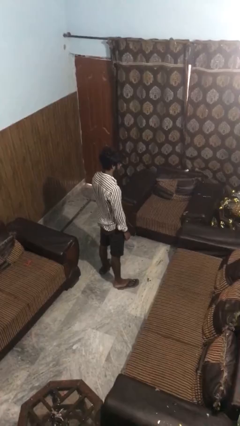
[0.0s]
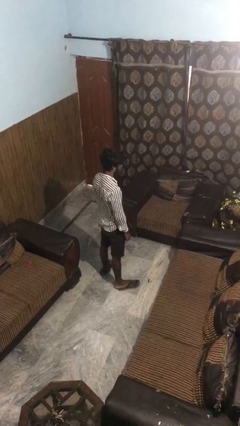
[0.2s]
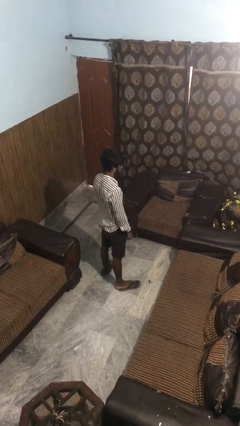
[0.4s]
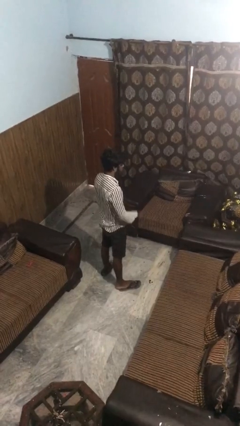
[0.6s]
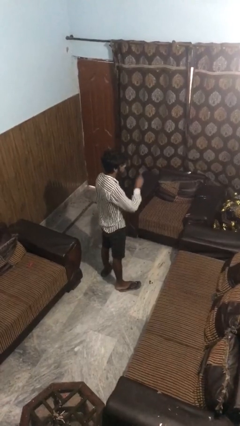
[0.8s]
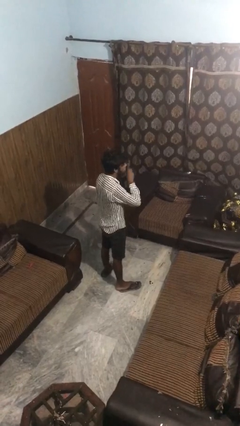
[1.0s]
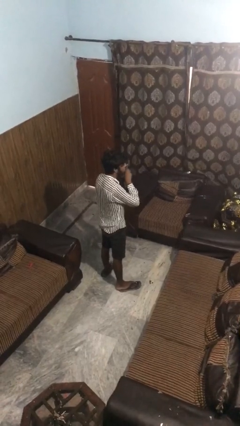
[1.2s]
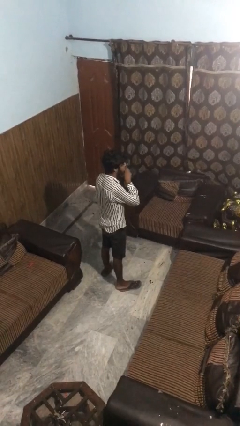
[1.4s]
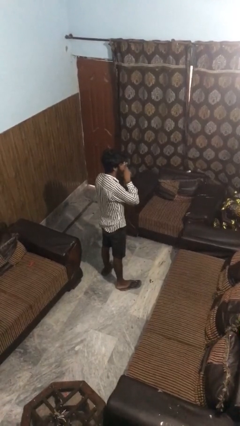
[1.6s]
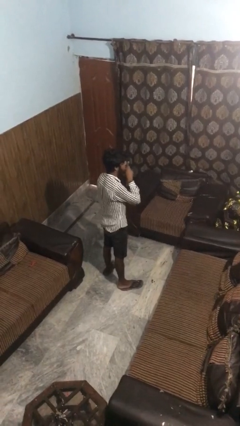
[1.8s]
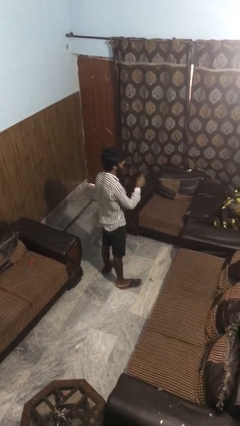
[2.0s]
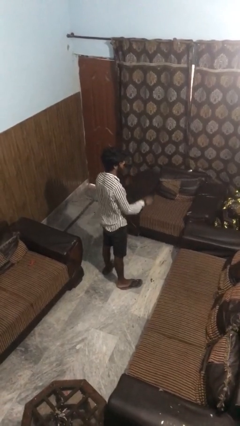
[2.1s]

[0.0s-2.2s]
person gestures be quiet

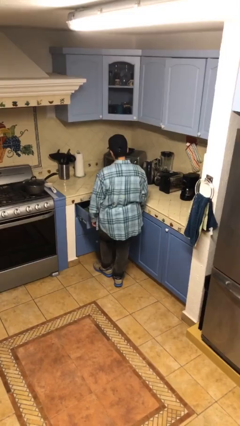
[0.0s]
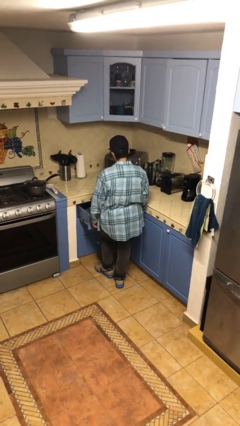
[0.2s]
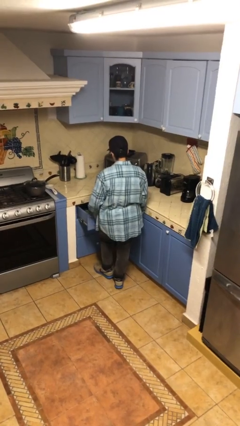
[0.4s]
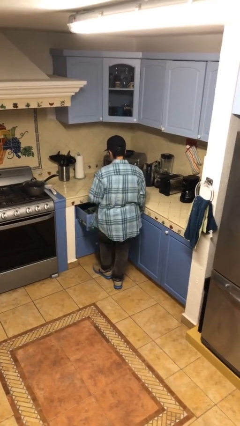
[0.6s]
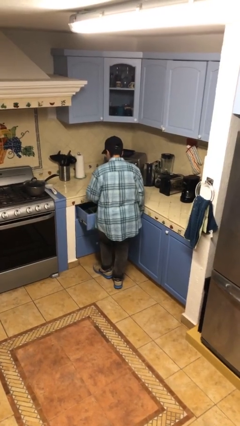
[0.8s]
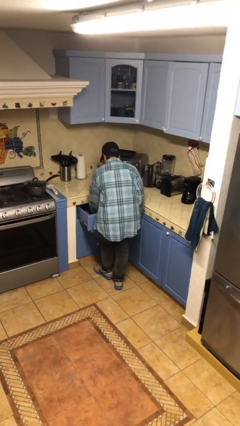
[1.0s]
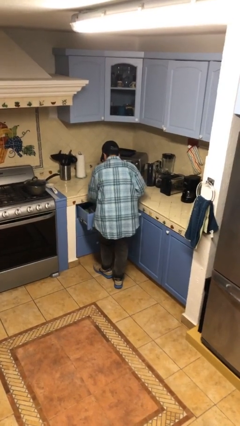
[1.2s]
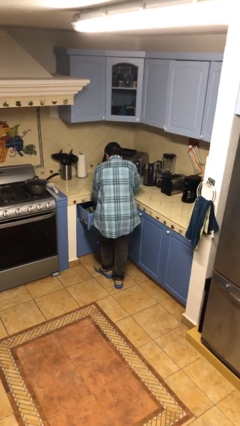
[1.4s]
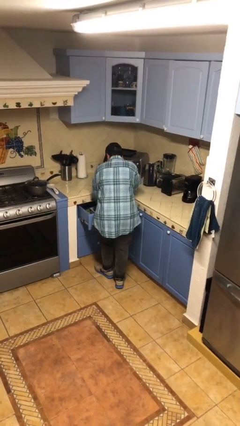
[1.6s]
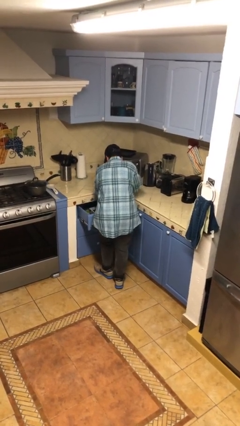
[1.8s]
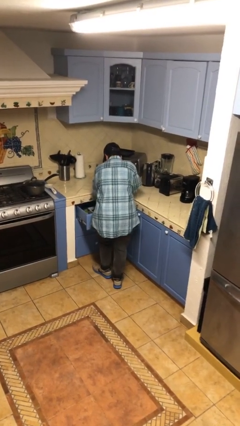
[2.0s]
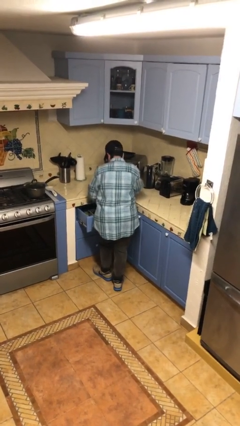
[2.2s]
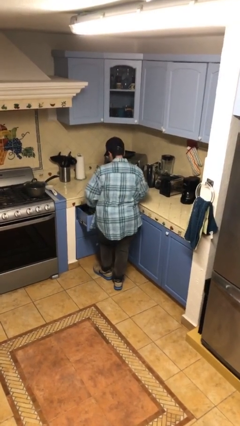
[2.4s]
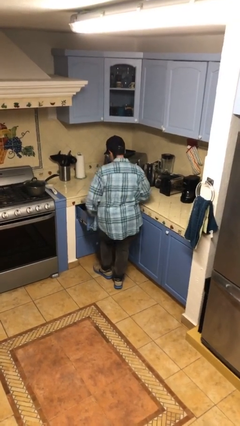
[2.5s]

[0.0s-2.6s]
person searches in kitchen drawer

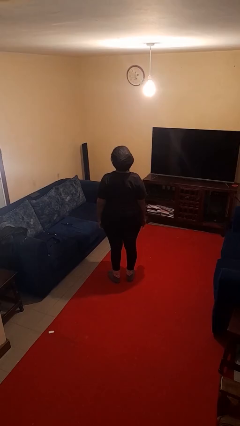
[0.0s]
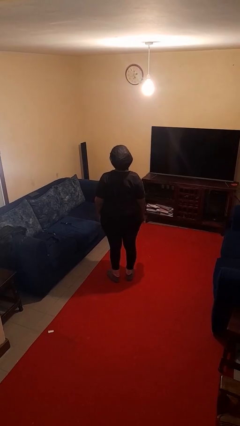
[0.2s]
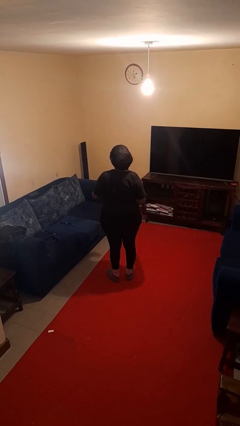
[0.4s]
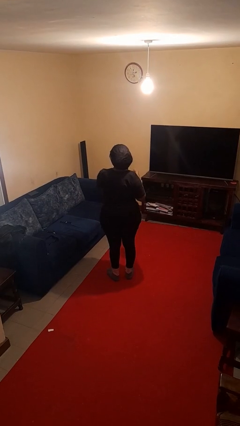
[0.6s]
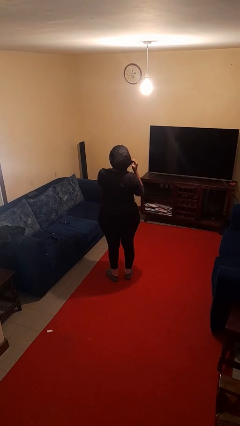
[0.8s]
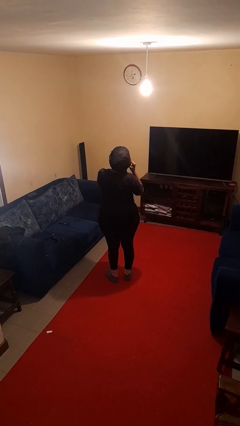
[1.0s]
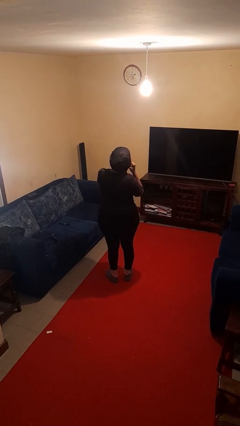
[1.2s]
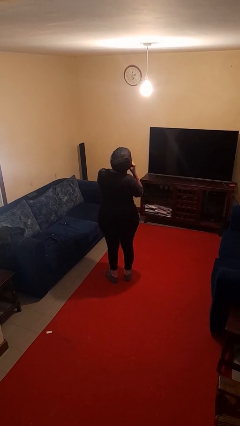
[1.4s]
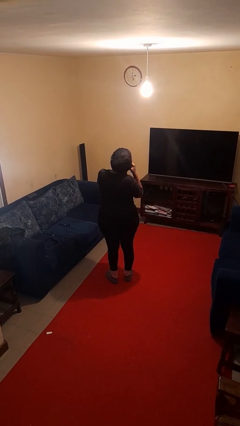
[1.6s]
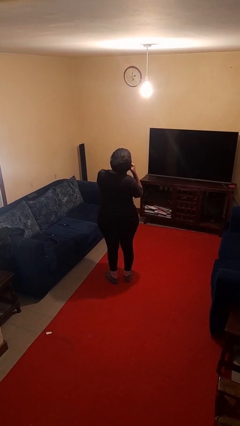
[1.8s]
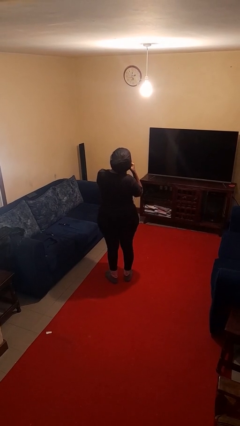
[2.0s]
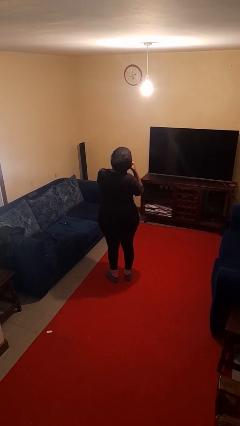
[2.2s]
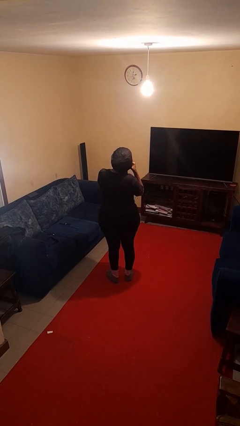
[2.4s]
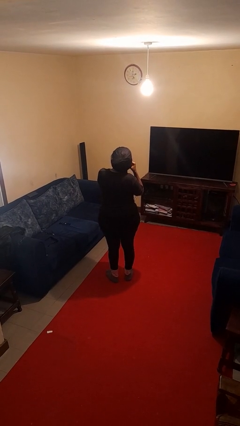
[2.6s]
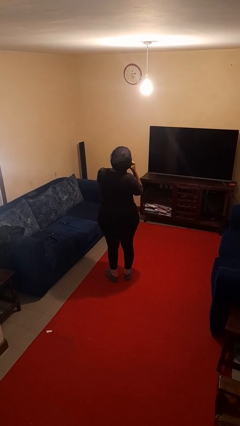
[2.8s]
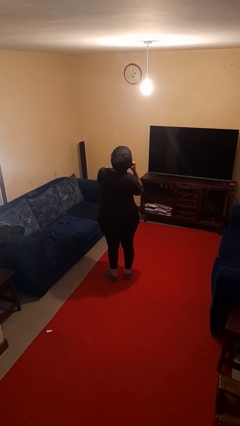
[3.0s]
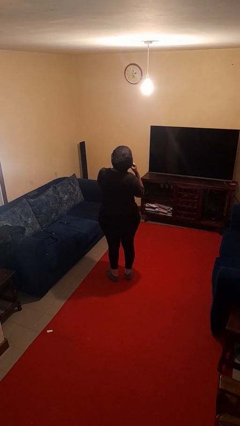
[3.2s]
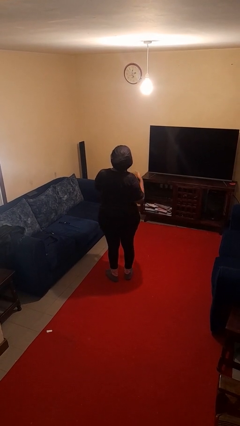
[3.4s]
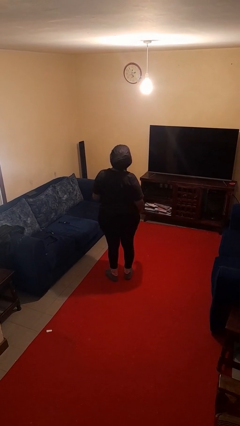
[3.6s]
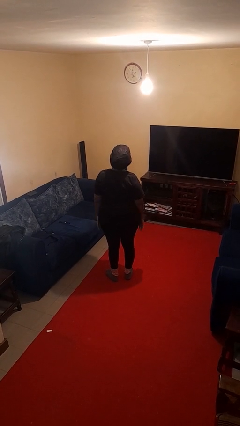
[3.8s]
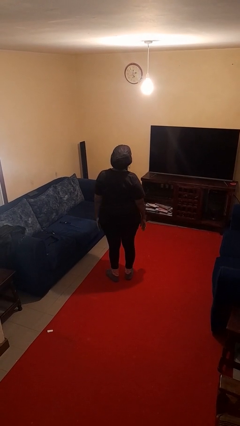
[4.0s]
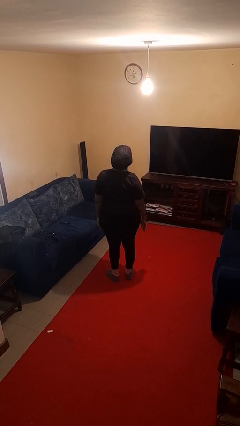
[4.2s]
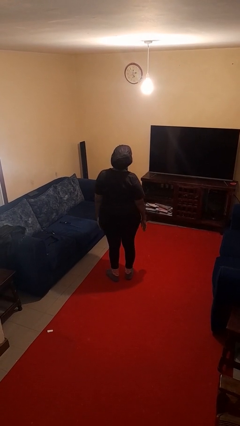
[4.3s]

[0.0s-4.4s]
person puts on earrings

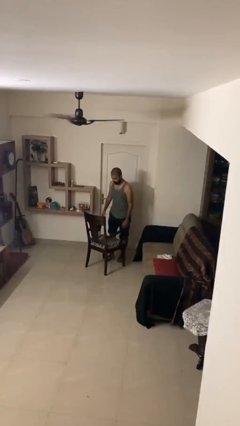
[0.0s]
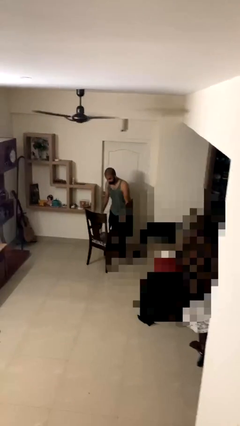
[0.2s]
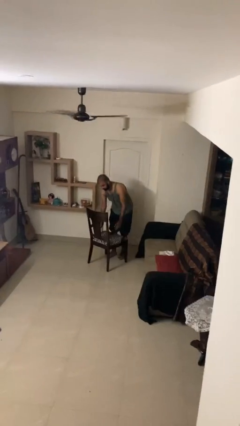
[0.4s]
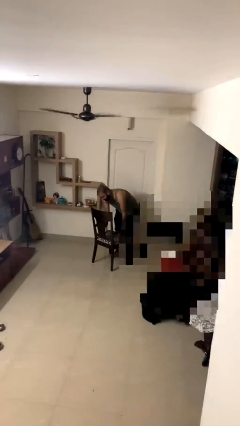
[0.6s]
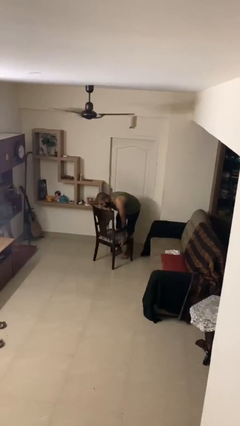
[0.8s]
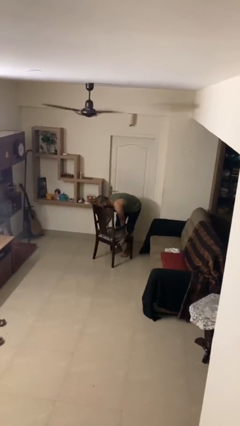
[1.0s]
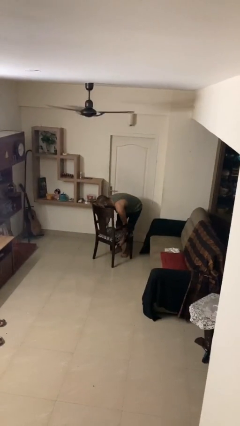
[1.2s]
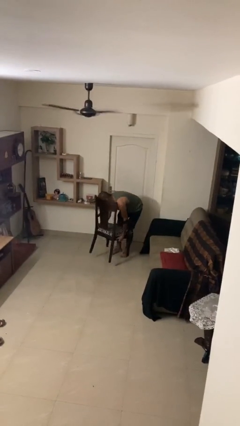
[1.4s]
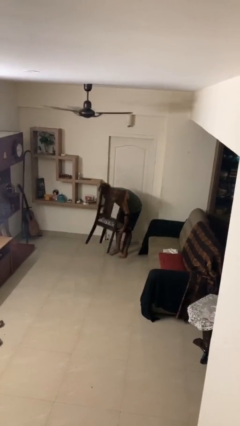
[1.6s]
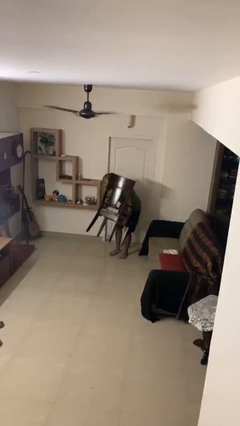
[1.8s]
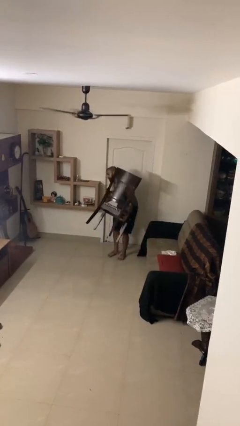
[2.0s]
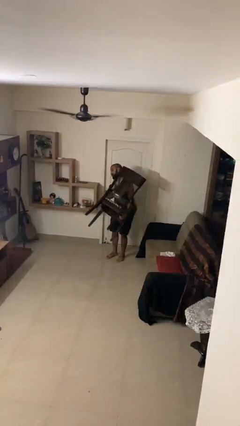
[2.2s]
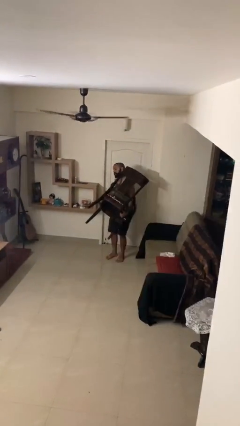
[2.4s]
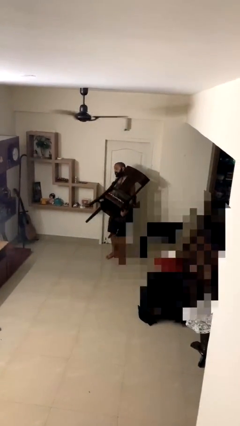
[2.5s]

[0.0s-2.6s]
person picks up object from floor

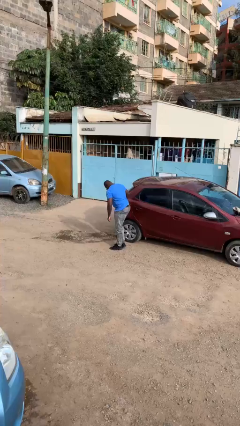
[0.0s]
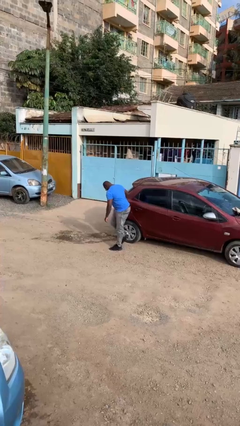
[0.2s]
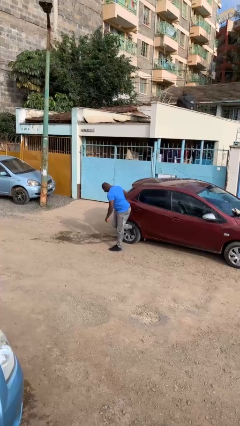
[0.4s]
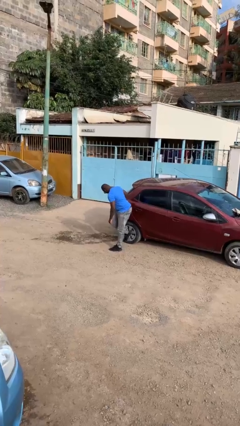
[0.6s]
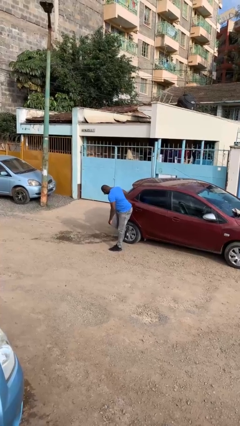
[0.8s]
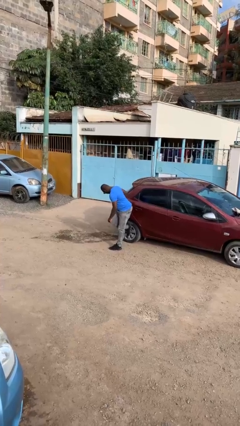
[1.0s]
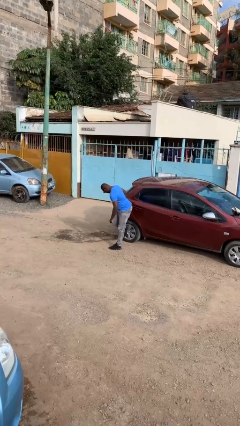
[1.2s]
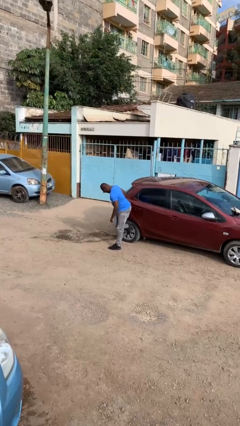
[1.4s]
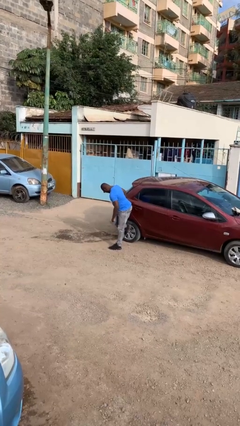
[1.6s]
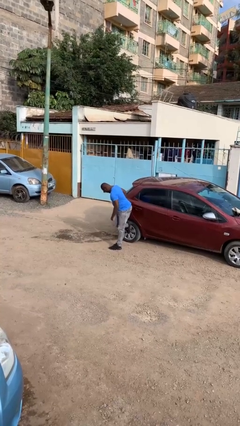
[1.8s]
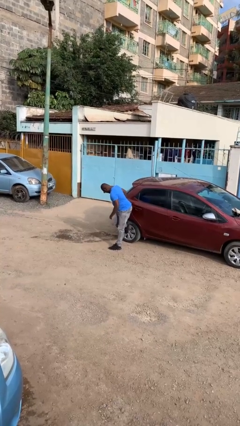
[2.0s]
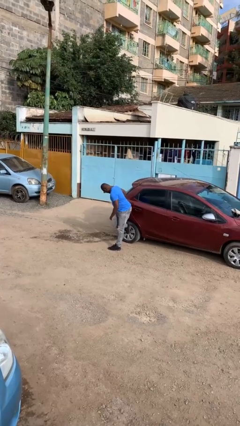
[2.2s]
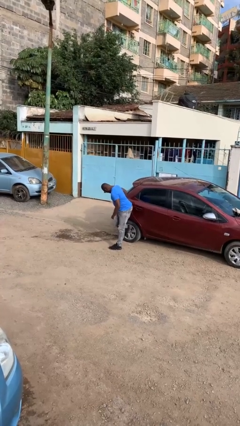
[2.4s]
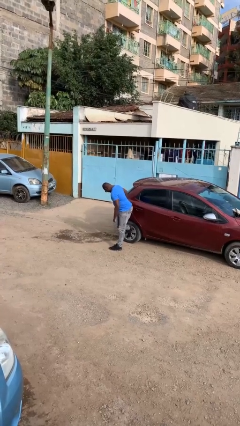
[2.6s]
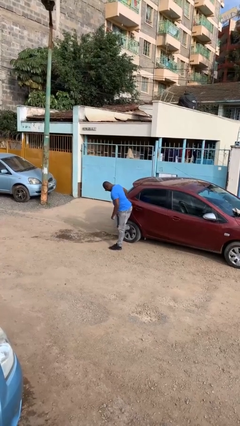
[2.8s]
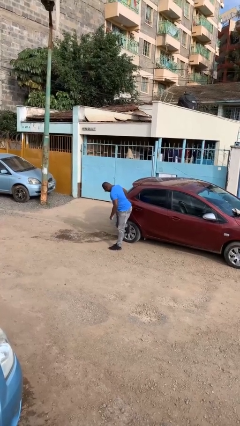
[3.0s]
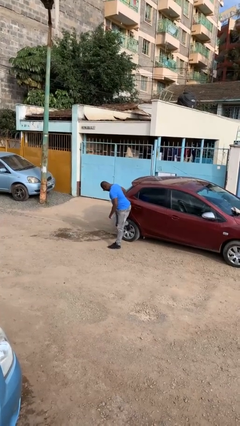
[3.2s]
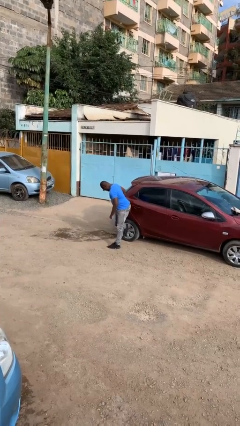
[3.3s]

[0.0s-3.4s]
person kicks car tires

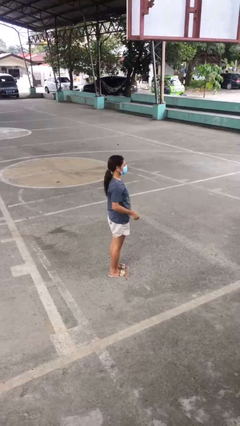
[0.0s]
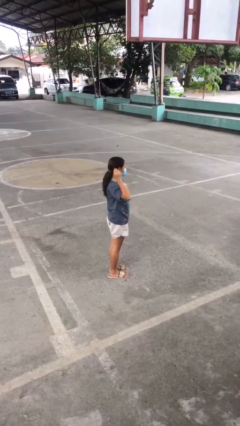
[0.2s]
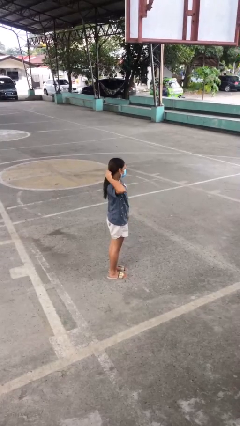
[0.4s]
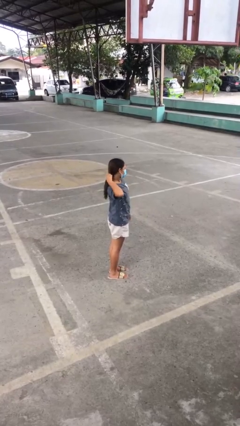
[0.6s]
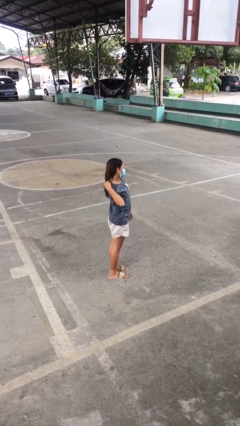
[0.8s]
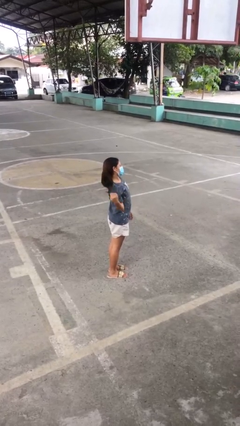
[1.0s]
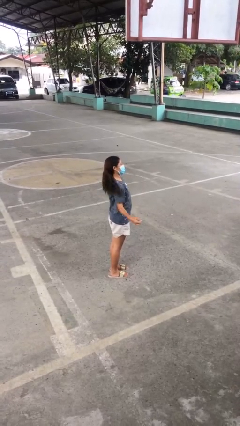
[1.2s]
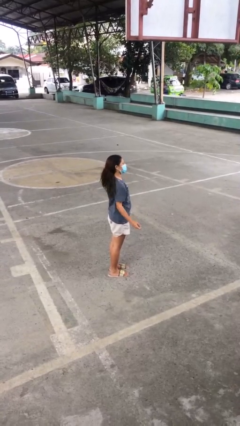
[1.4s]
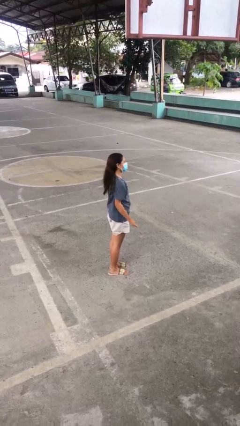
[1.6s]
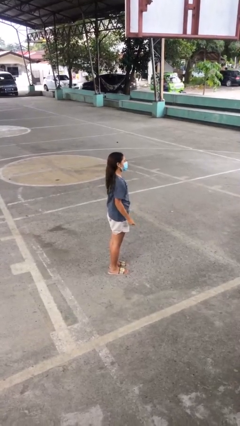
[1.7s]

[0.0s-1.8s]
person takes off hairtie

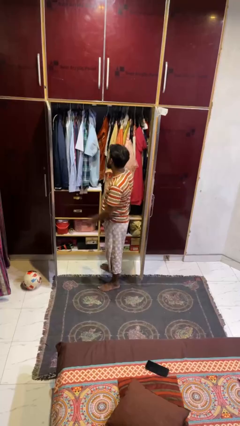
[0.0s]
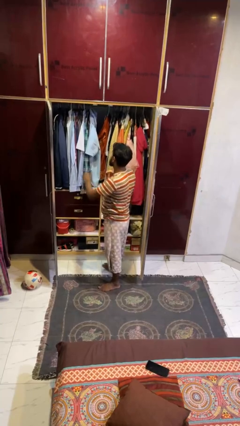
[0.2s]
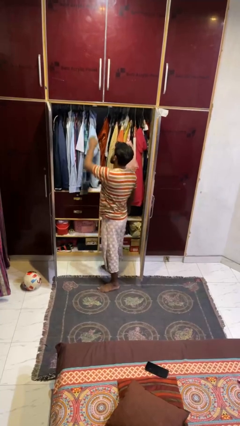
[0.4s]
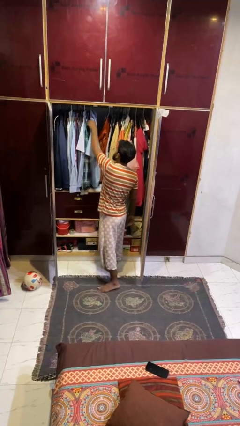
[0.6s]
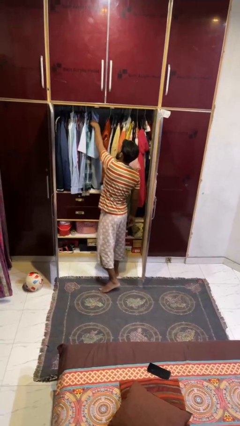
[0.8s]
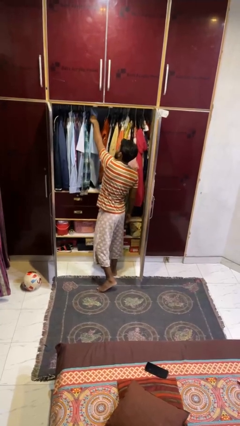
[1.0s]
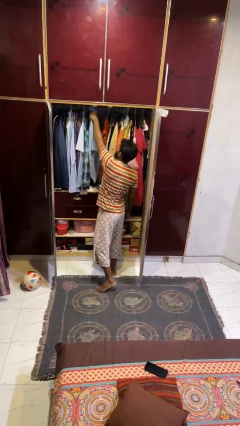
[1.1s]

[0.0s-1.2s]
person puts clothes into closet
